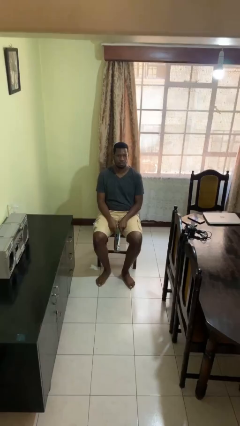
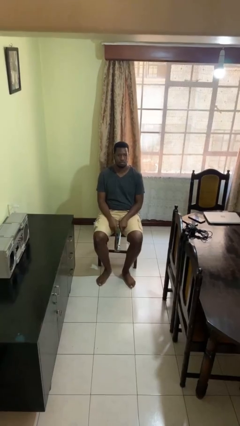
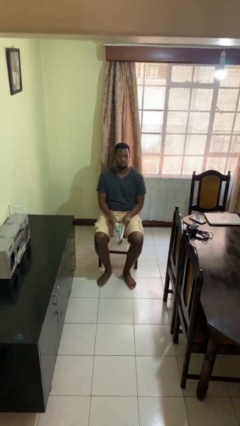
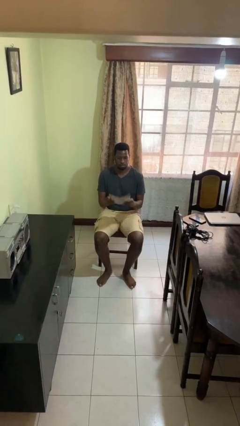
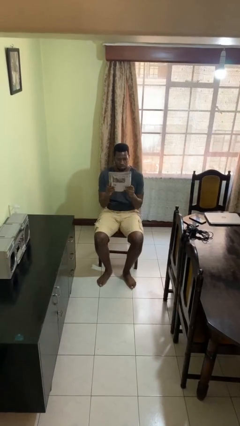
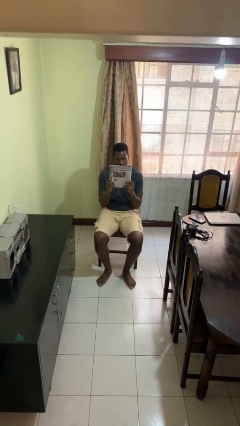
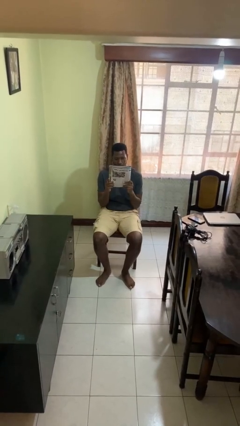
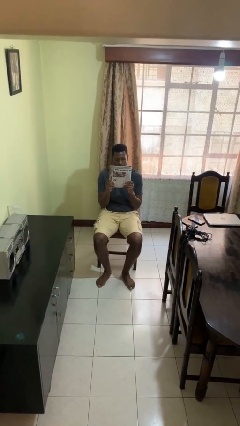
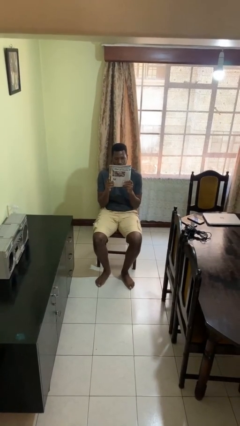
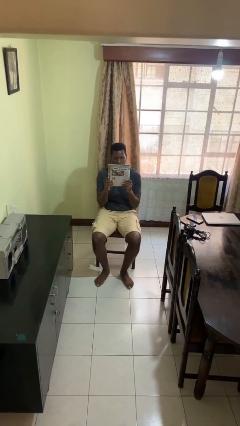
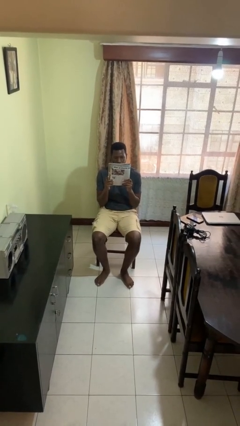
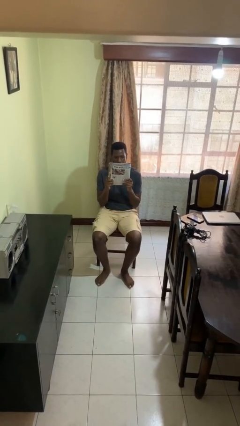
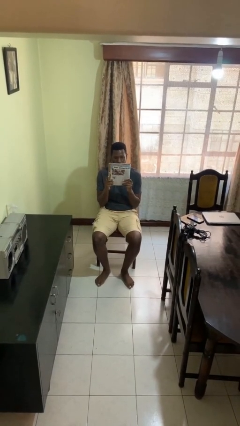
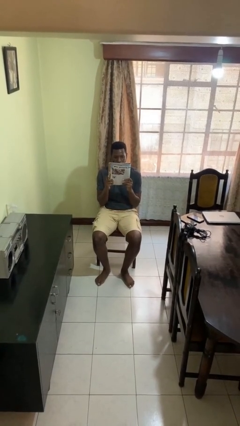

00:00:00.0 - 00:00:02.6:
person reads document

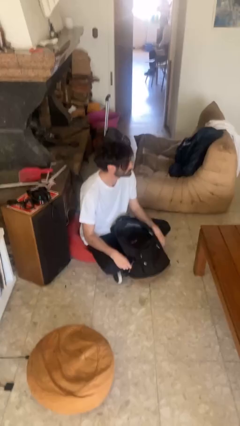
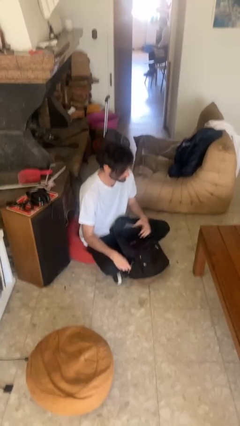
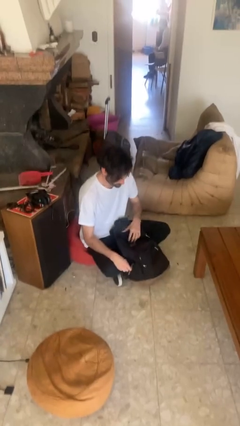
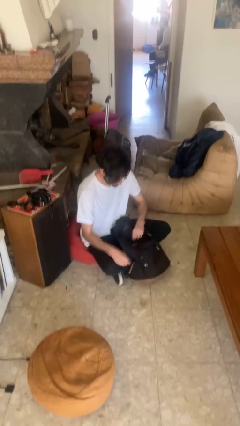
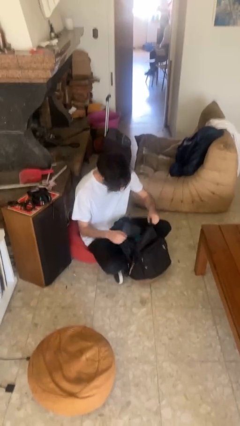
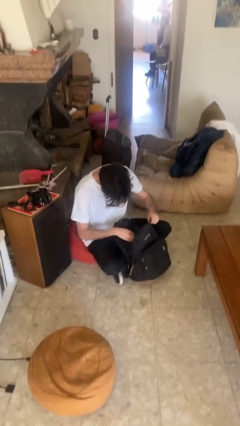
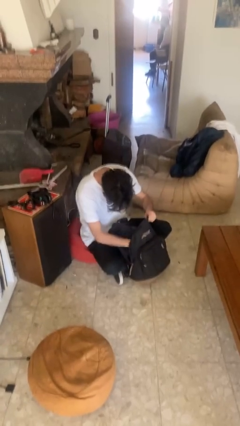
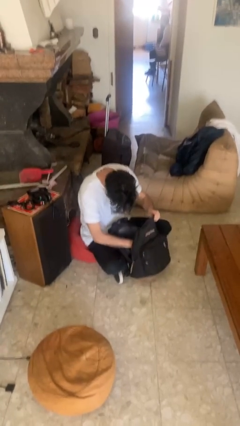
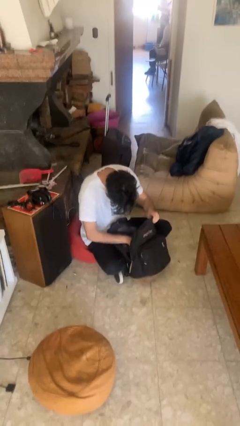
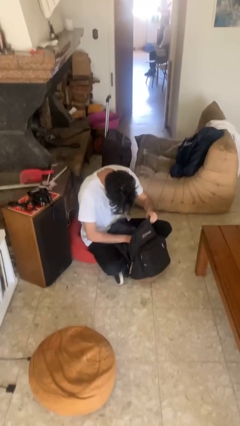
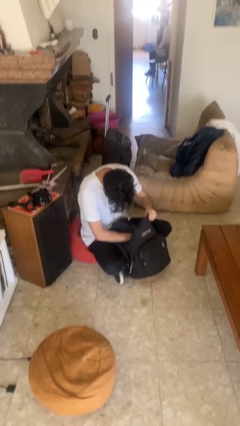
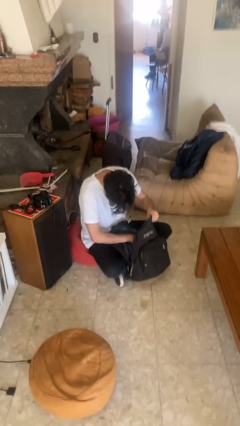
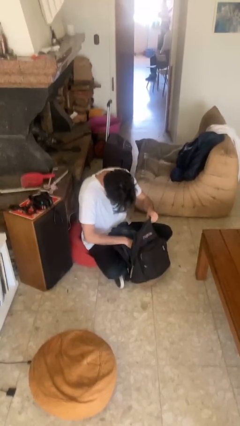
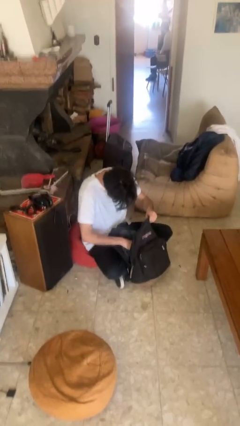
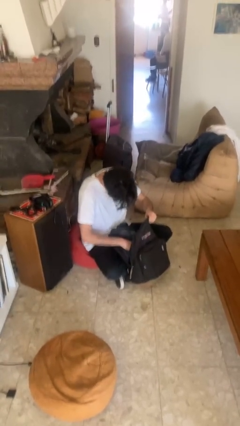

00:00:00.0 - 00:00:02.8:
person searches in backpack

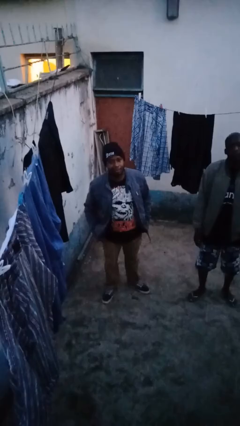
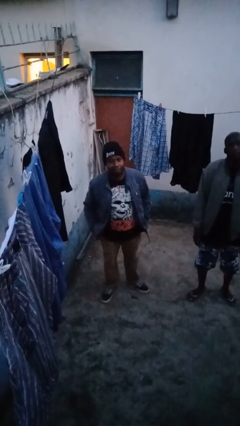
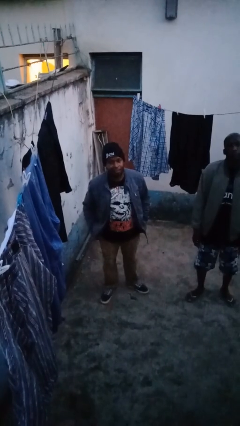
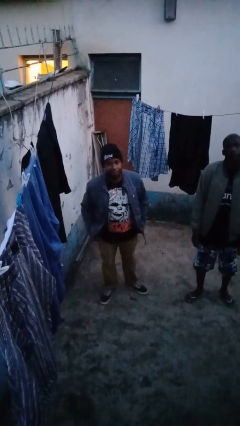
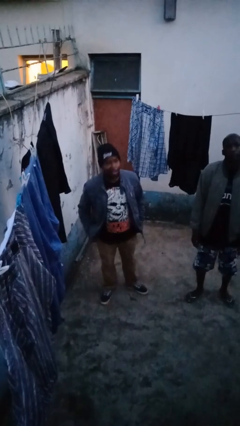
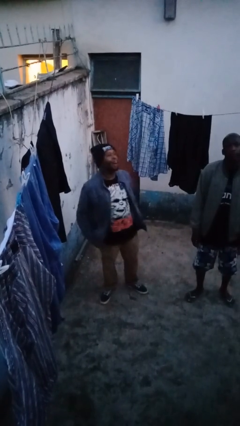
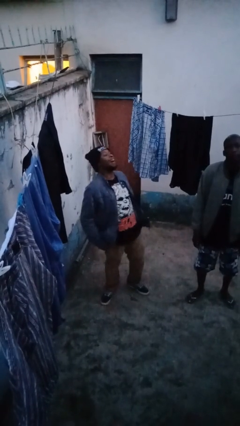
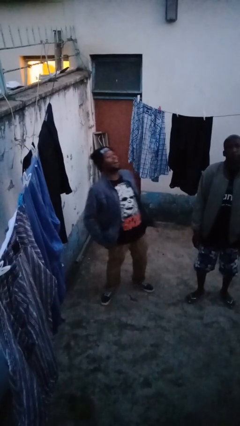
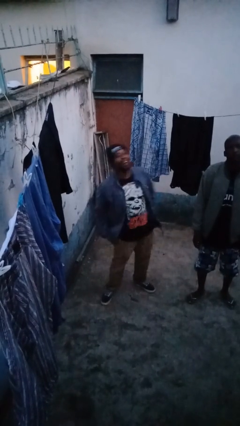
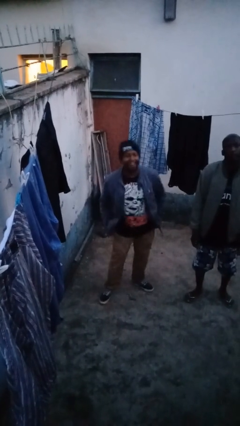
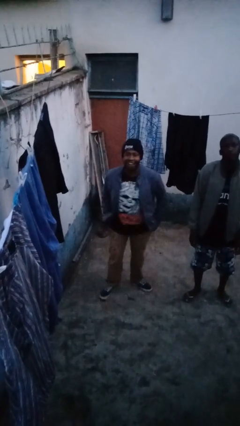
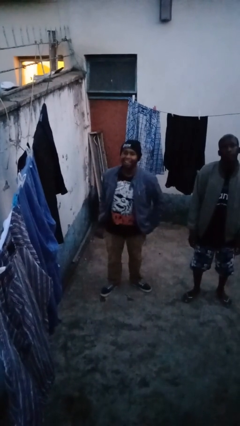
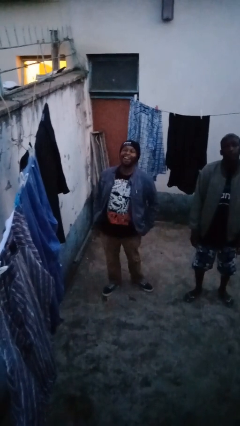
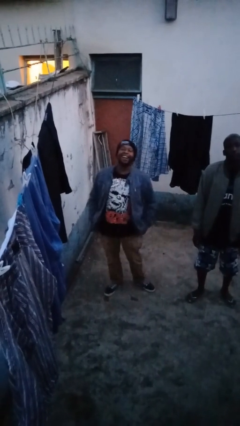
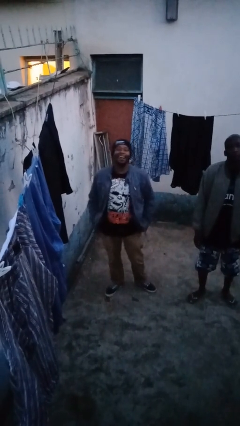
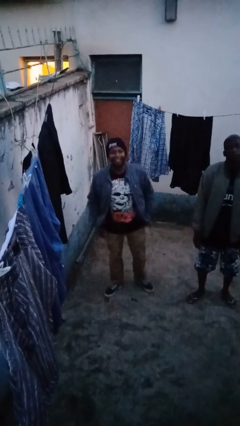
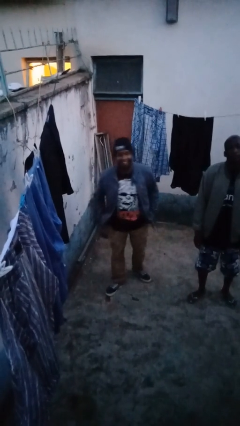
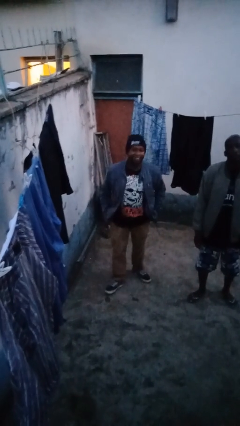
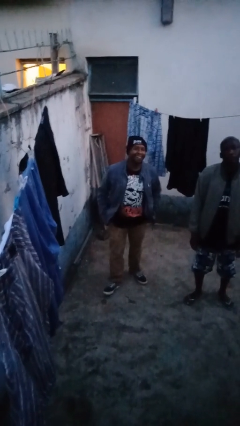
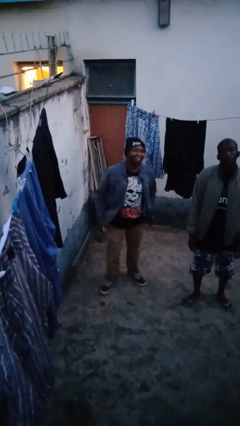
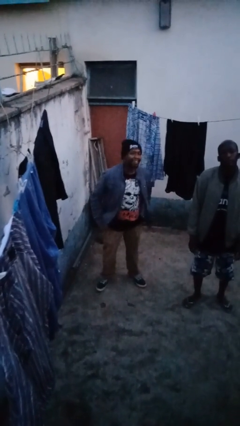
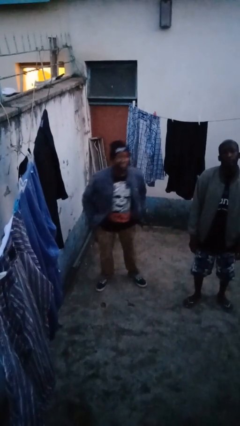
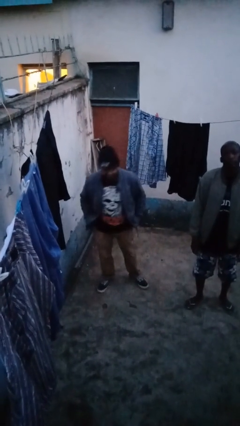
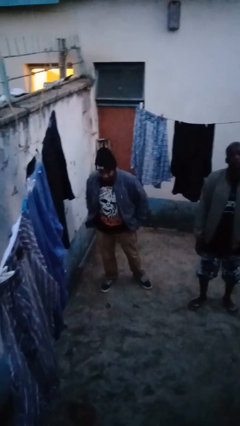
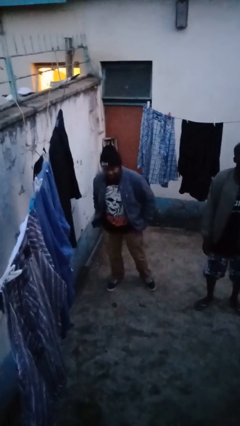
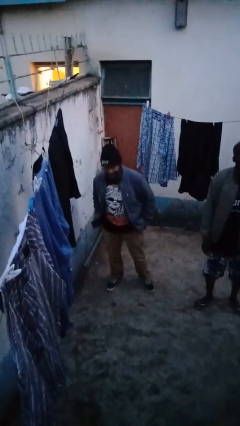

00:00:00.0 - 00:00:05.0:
person laughs with person

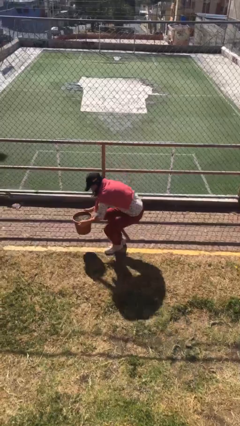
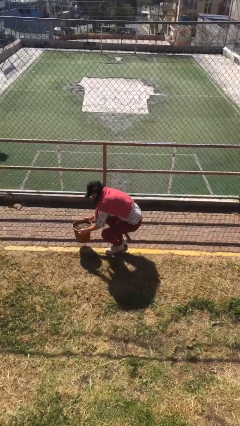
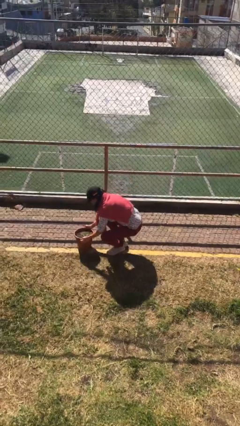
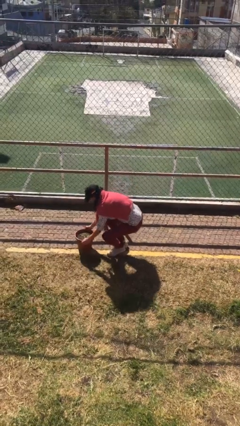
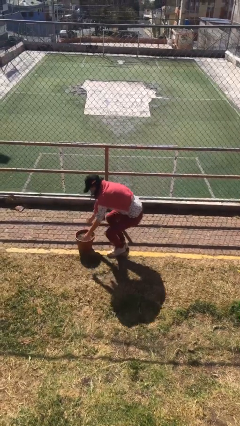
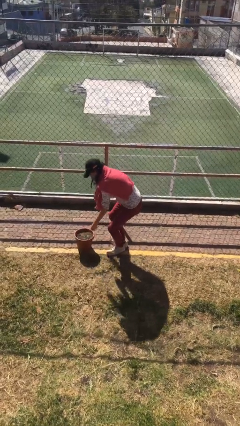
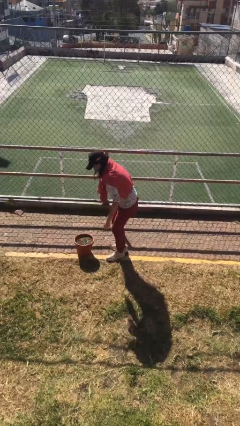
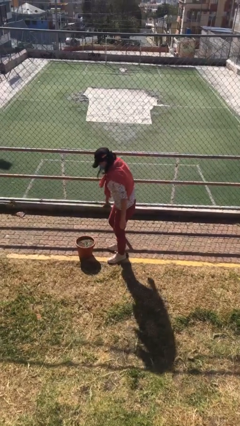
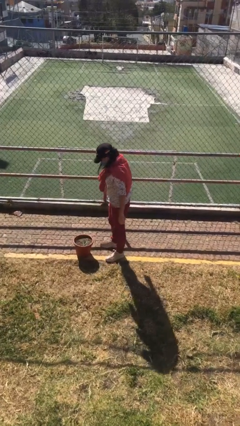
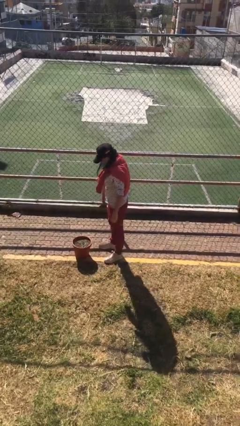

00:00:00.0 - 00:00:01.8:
person puts down object on floor

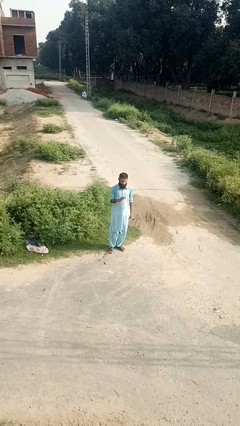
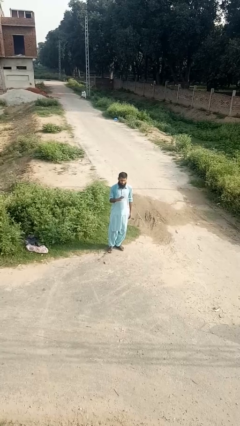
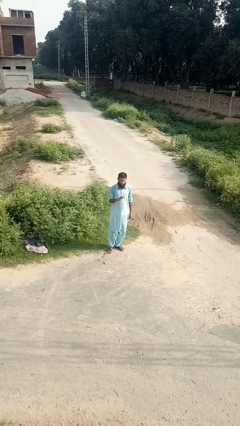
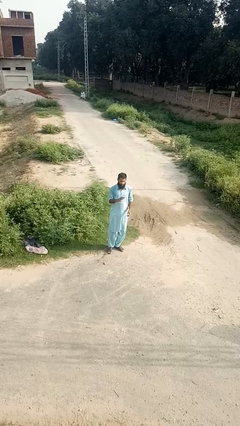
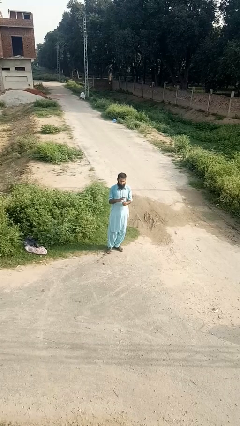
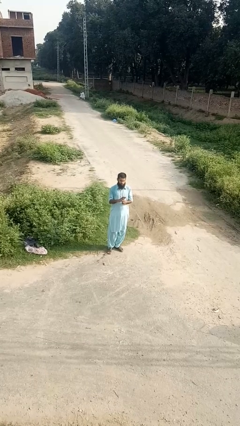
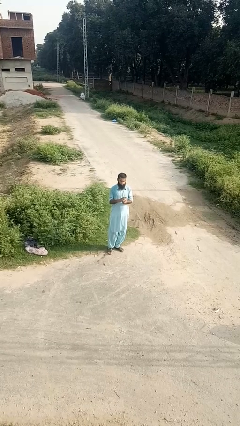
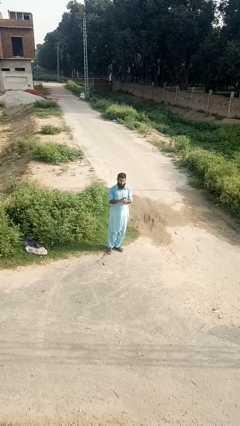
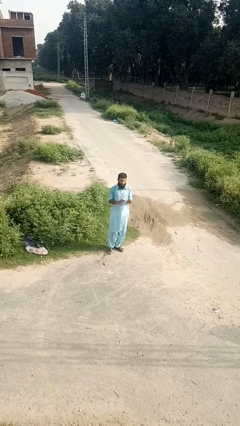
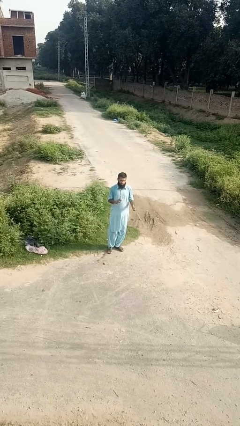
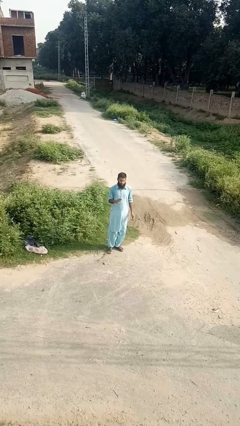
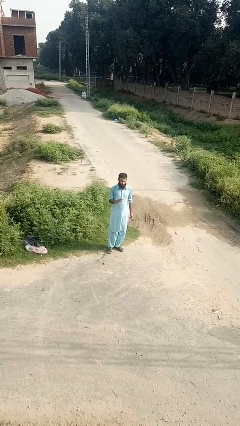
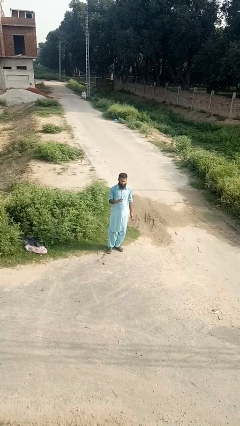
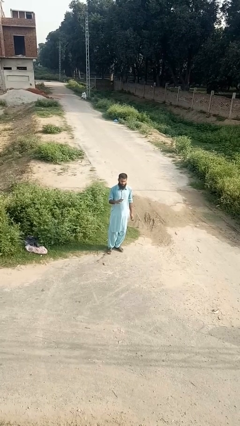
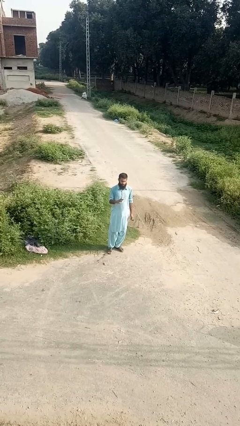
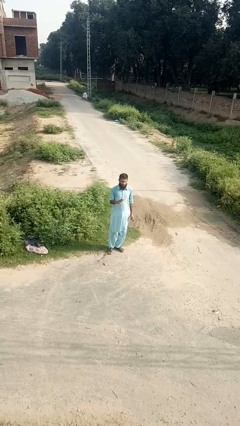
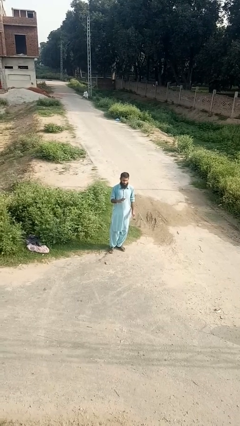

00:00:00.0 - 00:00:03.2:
person takes off ring

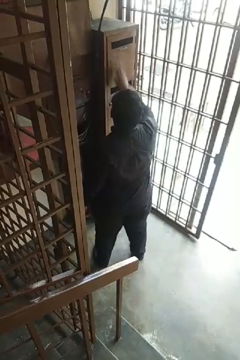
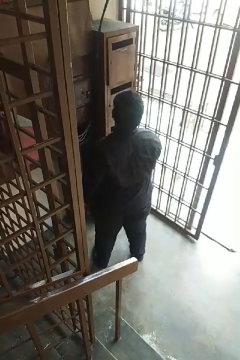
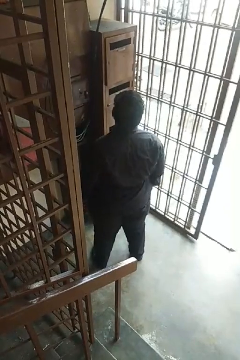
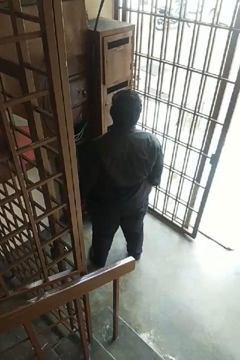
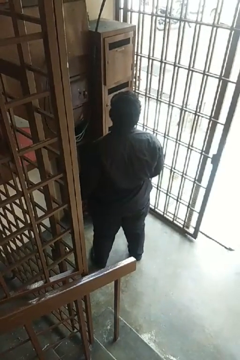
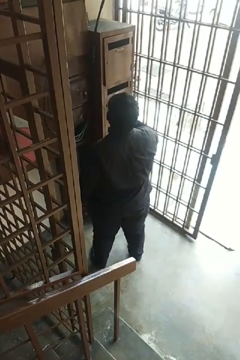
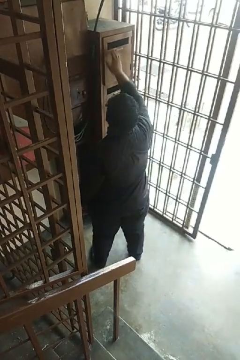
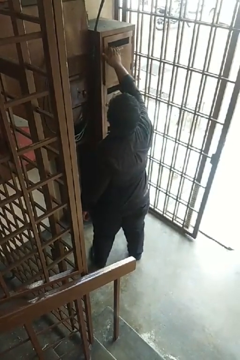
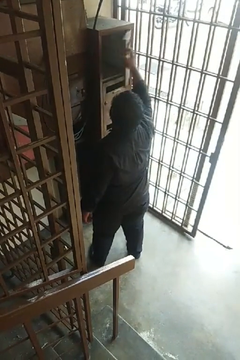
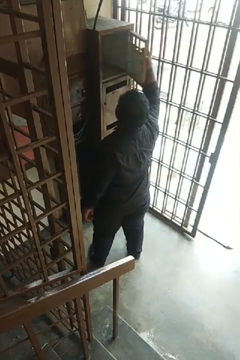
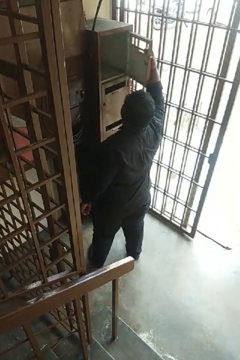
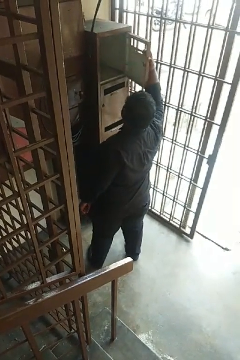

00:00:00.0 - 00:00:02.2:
person opens mailbox
